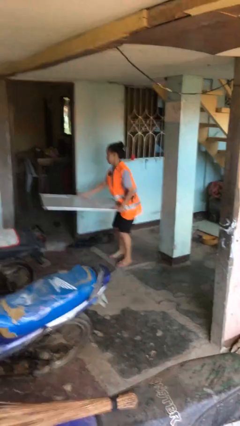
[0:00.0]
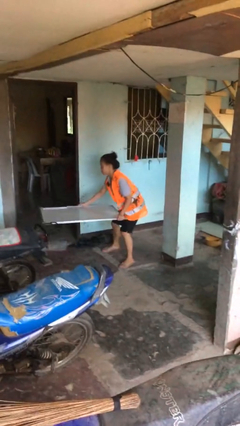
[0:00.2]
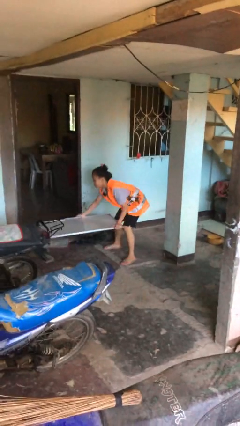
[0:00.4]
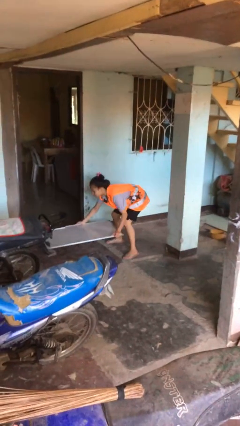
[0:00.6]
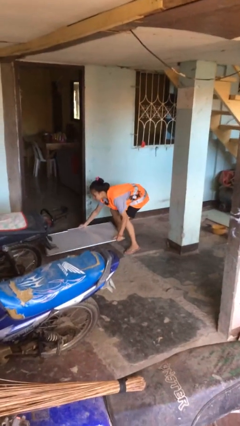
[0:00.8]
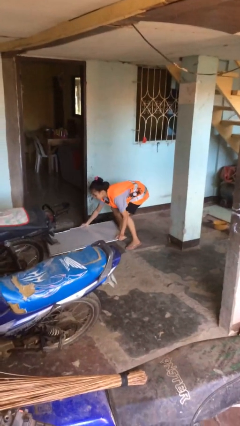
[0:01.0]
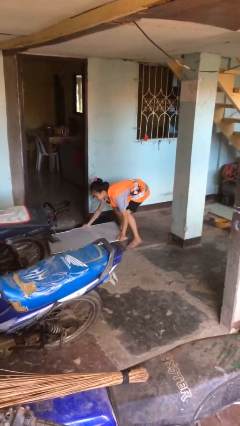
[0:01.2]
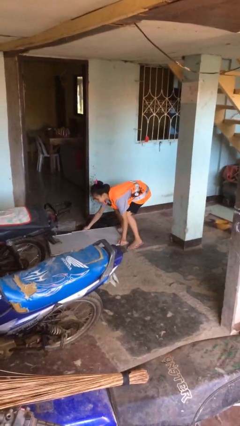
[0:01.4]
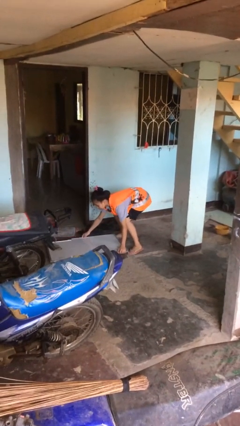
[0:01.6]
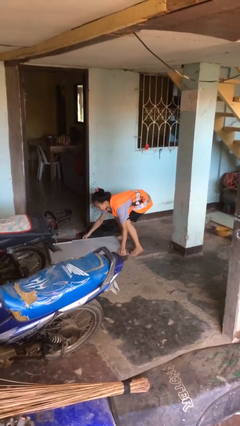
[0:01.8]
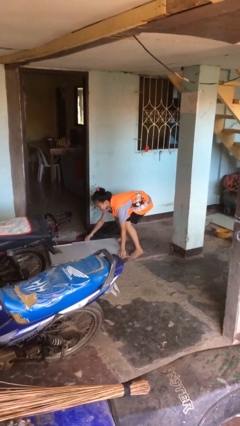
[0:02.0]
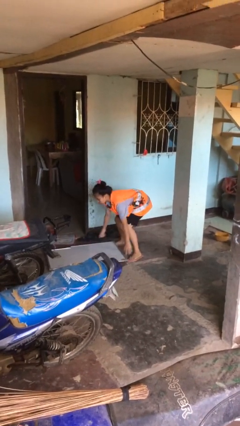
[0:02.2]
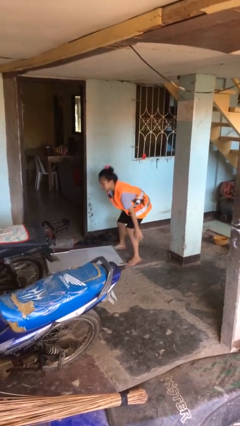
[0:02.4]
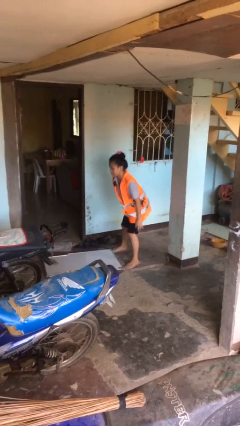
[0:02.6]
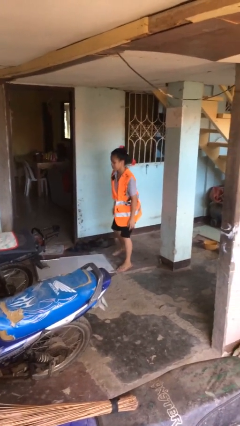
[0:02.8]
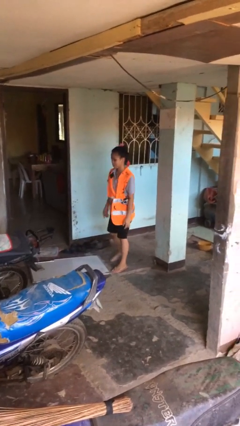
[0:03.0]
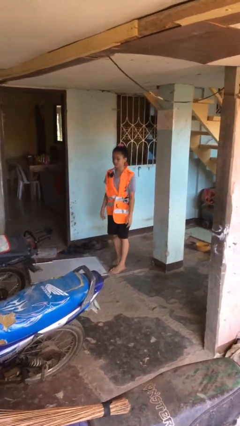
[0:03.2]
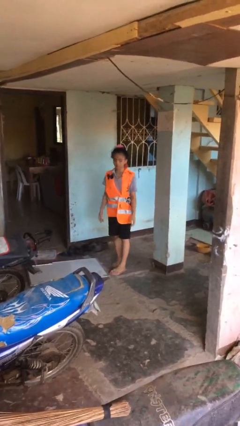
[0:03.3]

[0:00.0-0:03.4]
person puts down object on floor

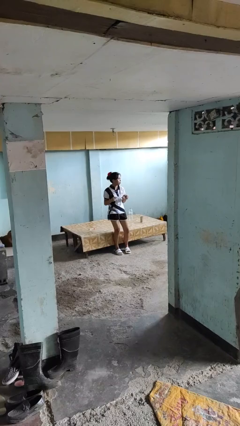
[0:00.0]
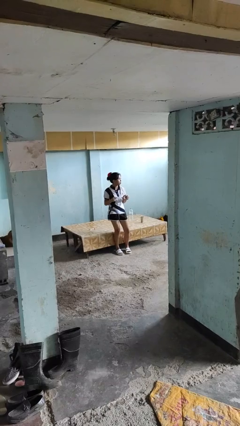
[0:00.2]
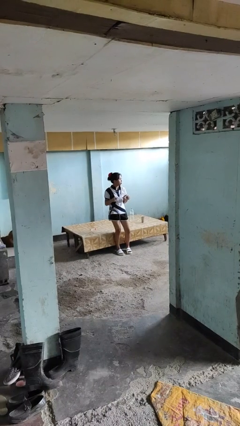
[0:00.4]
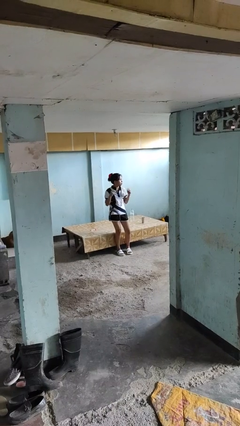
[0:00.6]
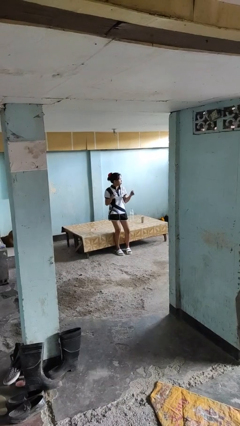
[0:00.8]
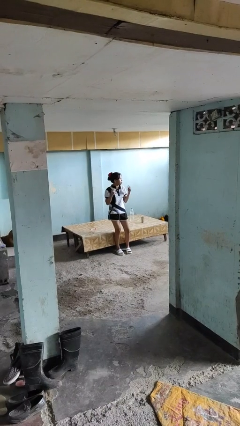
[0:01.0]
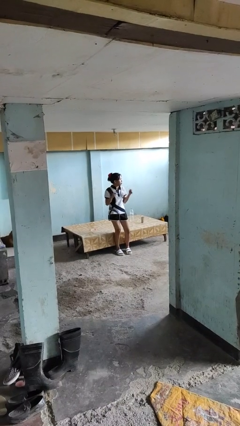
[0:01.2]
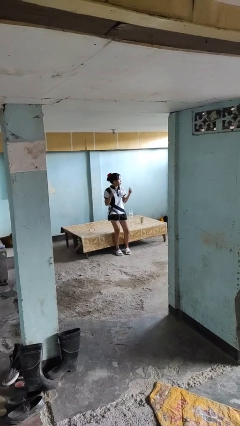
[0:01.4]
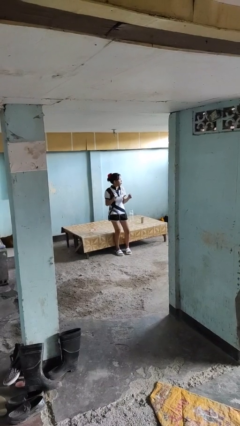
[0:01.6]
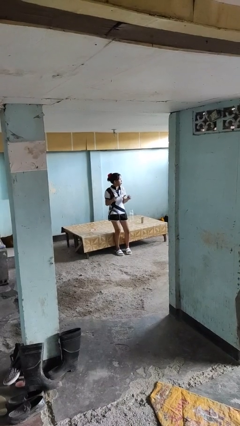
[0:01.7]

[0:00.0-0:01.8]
person snaps fingers

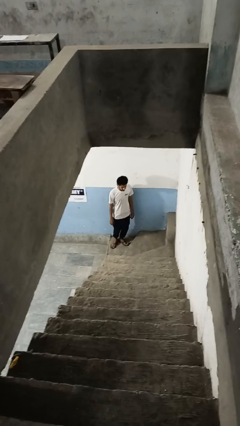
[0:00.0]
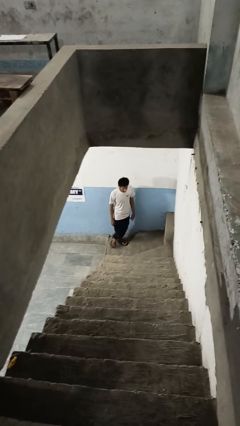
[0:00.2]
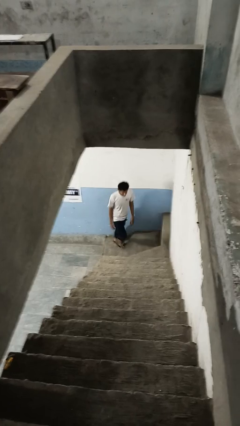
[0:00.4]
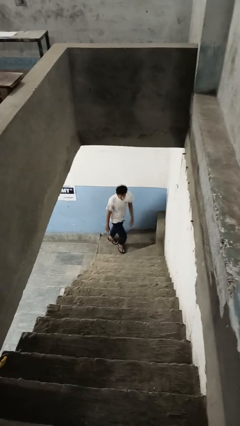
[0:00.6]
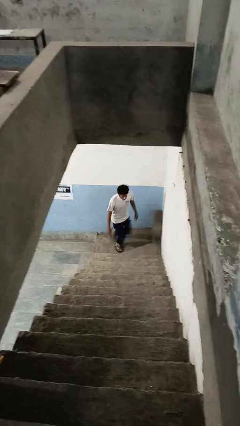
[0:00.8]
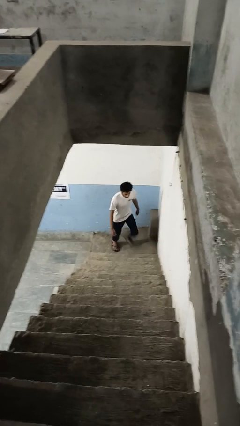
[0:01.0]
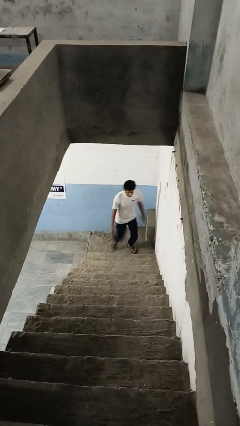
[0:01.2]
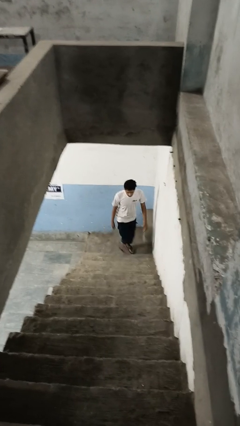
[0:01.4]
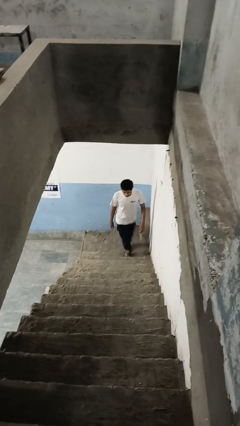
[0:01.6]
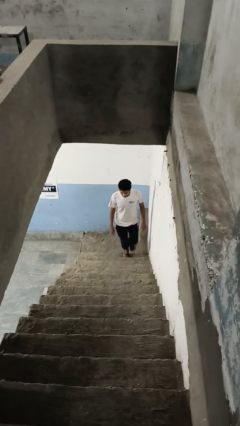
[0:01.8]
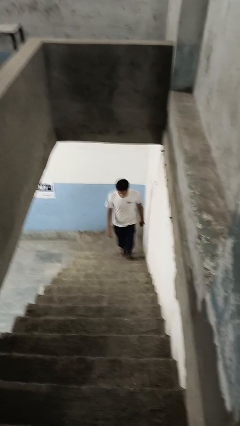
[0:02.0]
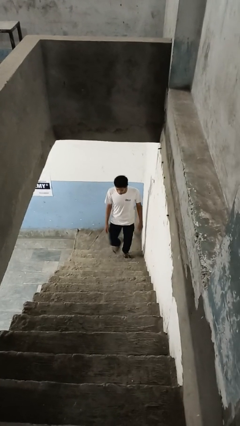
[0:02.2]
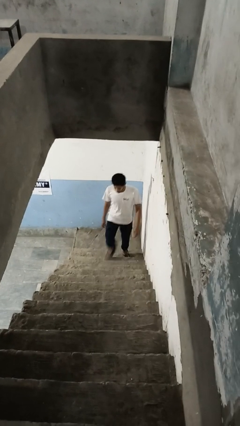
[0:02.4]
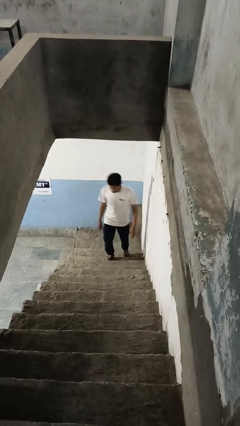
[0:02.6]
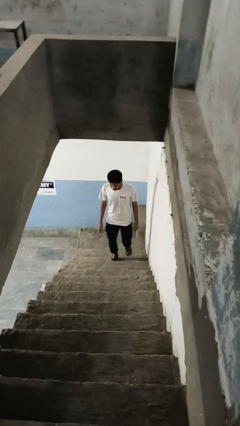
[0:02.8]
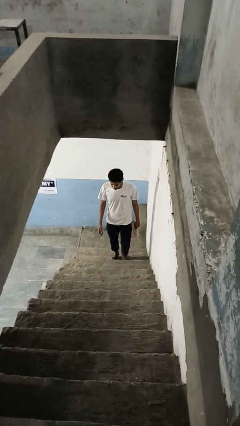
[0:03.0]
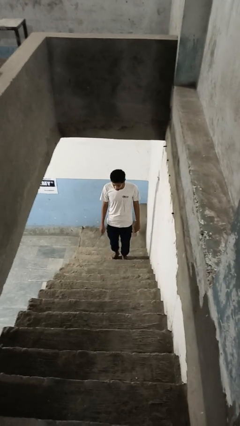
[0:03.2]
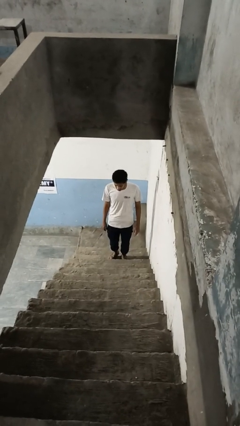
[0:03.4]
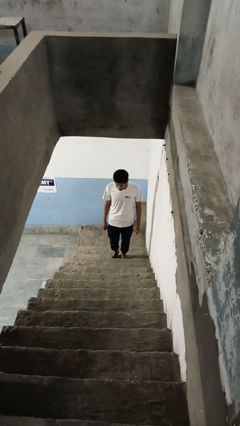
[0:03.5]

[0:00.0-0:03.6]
person climbs up stairs

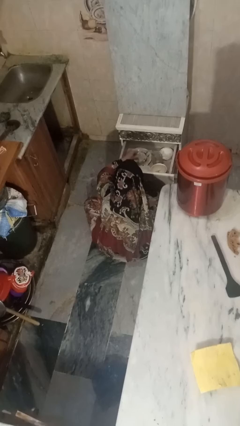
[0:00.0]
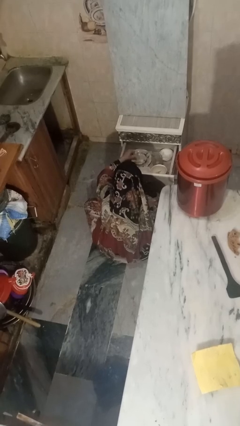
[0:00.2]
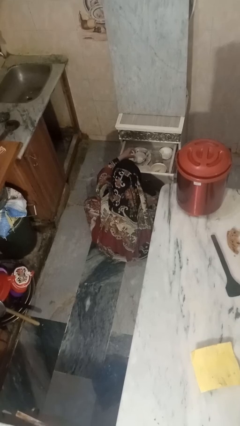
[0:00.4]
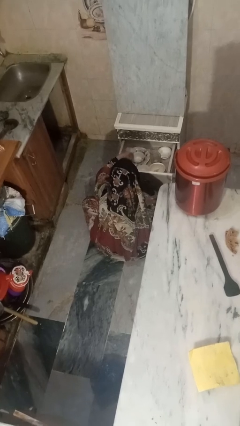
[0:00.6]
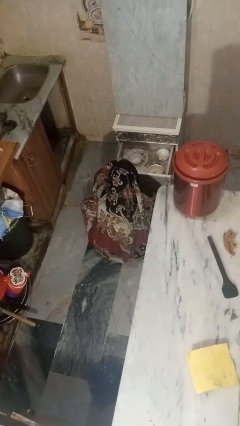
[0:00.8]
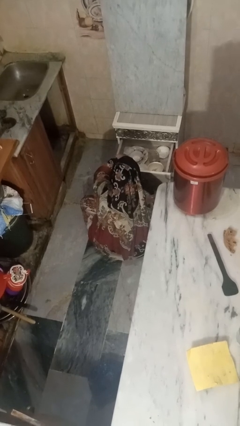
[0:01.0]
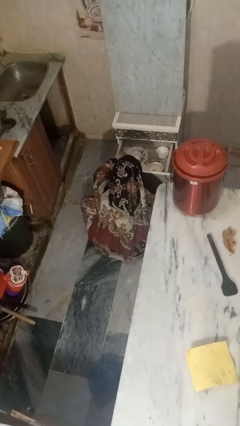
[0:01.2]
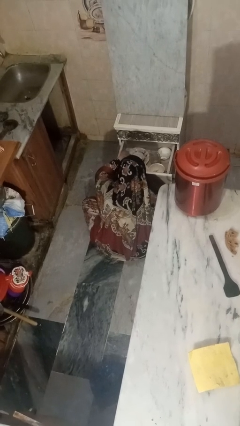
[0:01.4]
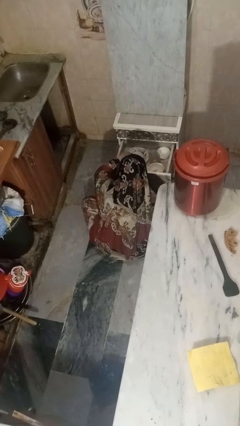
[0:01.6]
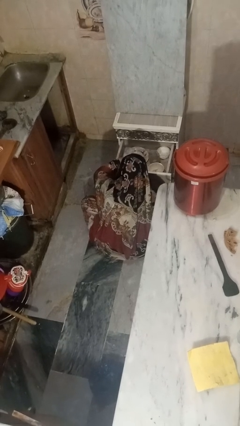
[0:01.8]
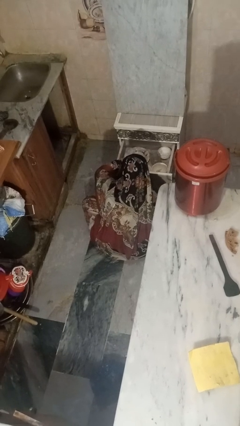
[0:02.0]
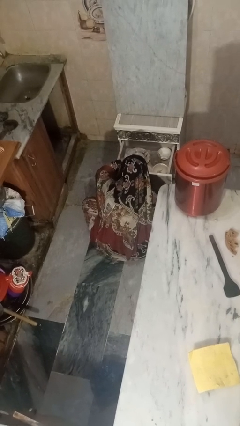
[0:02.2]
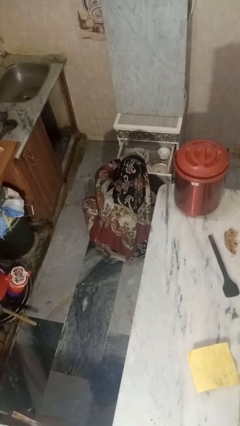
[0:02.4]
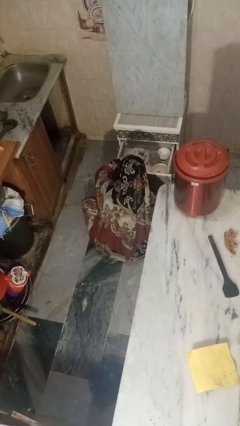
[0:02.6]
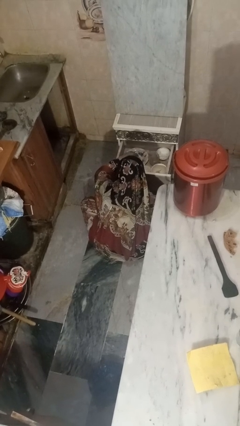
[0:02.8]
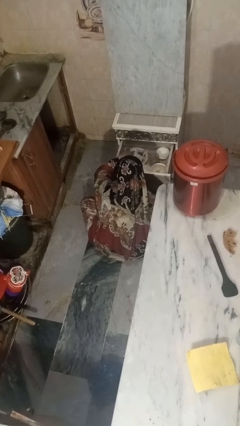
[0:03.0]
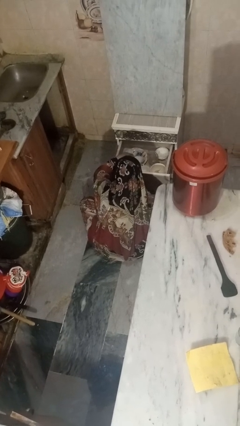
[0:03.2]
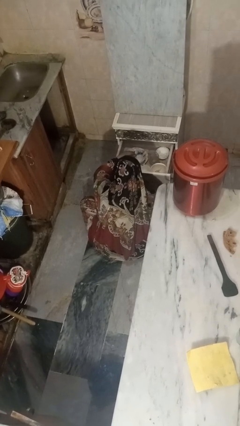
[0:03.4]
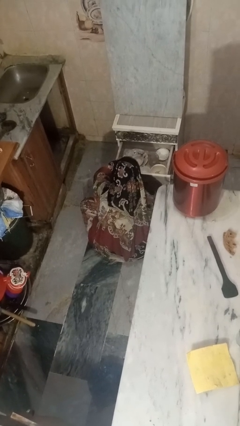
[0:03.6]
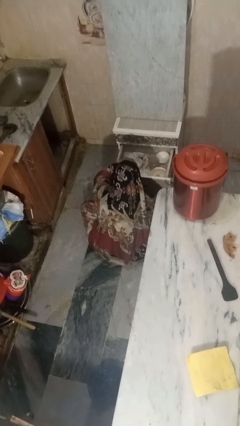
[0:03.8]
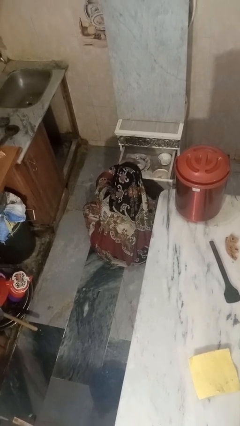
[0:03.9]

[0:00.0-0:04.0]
person searches in kitchen drawer

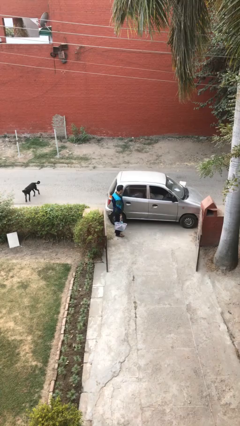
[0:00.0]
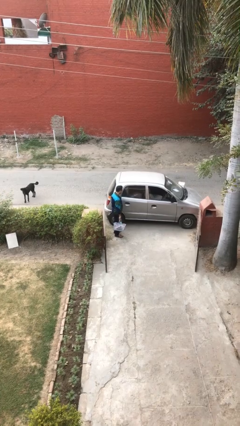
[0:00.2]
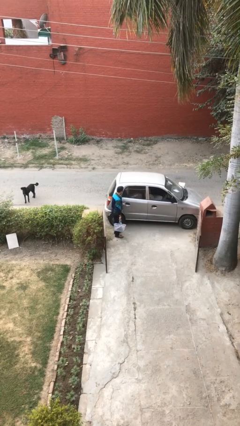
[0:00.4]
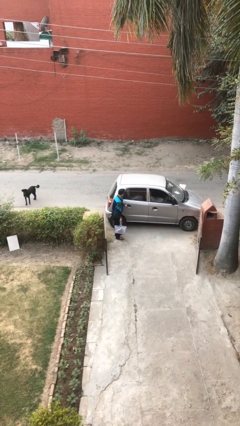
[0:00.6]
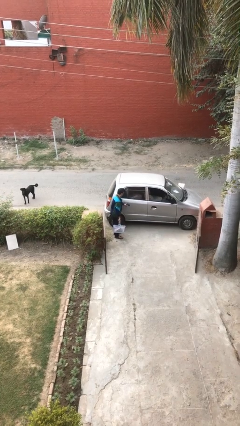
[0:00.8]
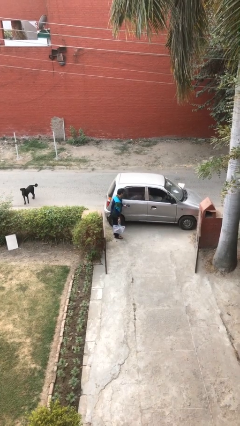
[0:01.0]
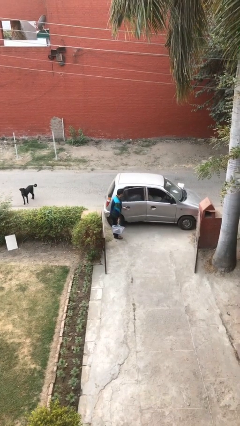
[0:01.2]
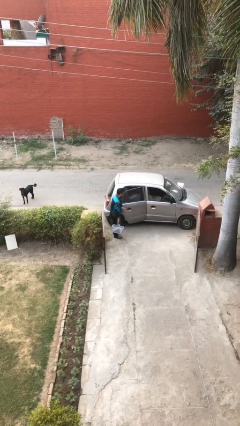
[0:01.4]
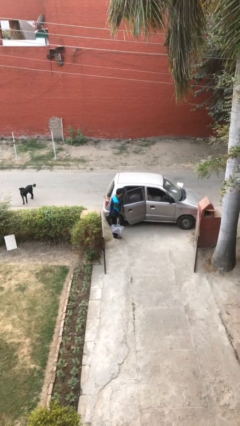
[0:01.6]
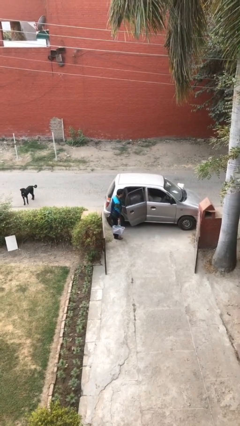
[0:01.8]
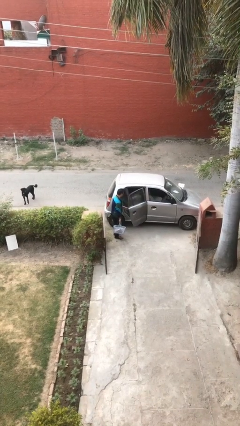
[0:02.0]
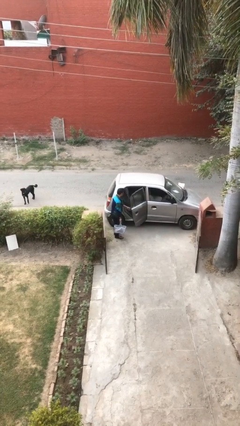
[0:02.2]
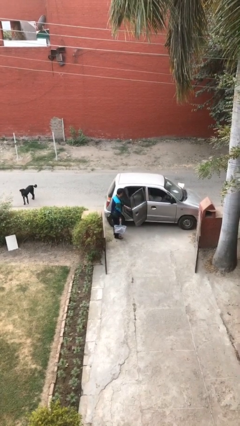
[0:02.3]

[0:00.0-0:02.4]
person opens car door

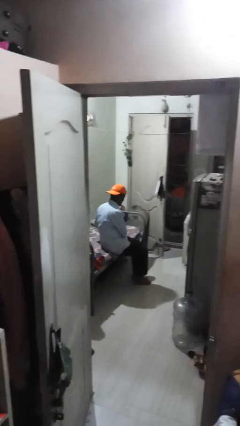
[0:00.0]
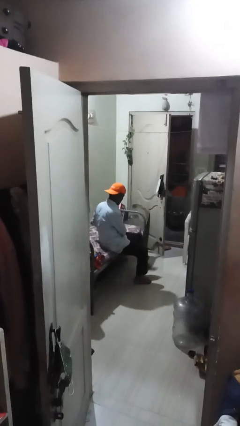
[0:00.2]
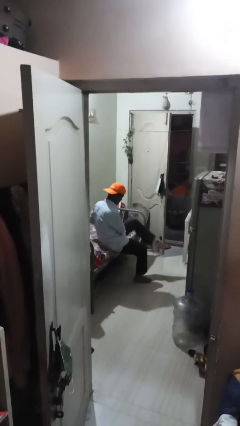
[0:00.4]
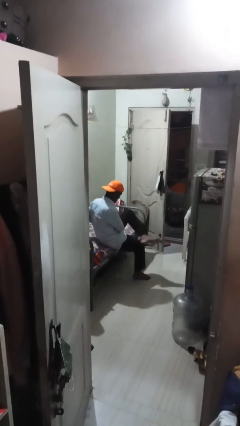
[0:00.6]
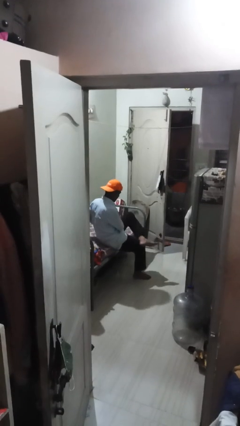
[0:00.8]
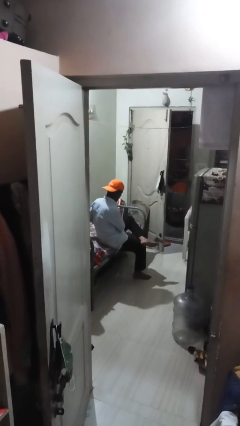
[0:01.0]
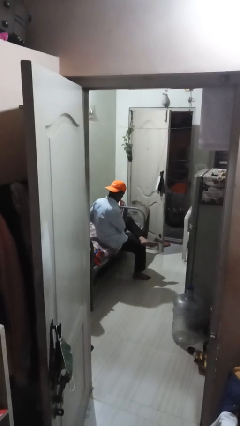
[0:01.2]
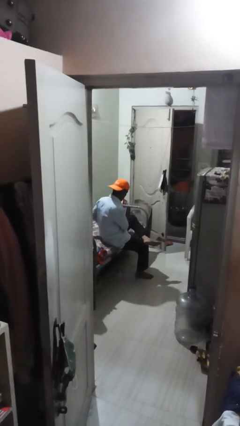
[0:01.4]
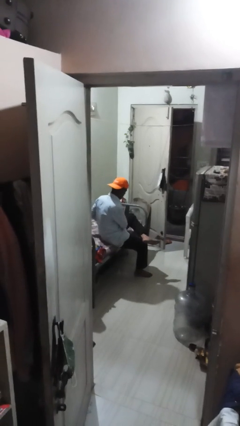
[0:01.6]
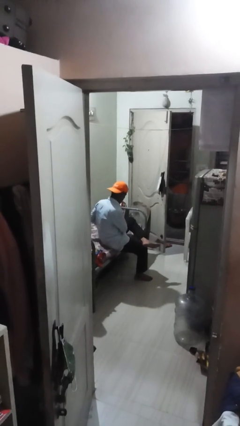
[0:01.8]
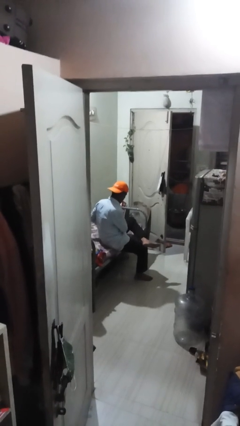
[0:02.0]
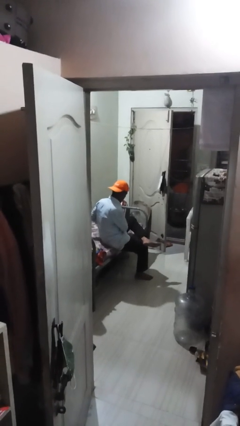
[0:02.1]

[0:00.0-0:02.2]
person crosses legs
